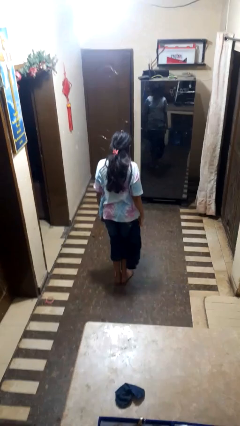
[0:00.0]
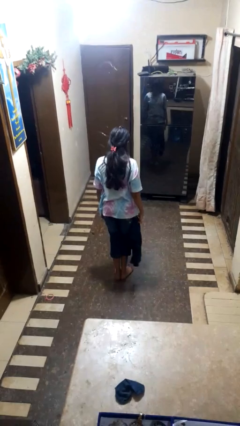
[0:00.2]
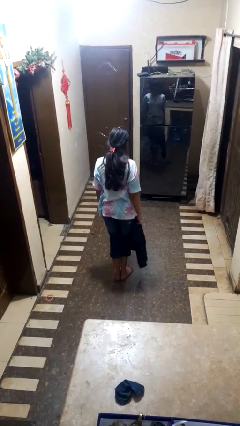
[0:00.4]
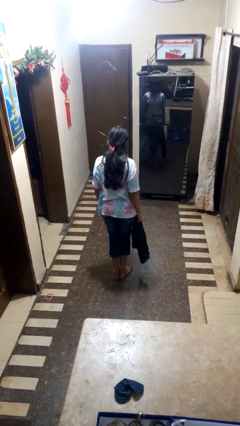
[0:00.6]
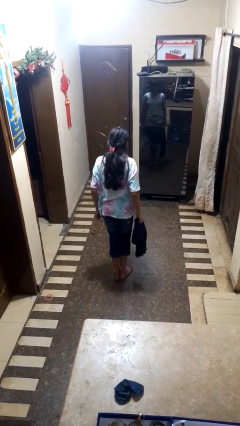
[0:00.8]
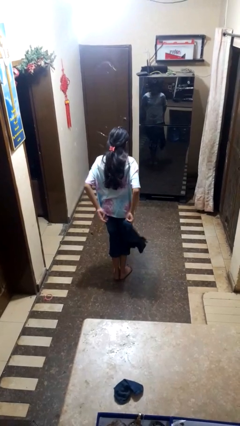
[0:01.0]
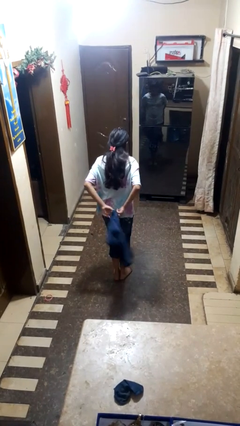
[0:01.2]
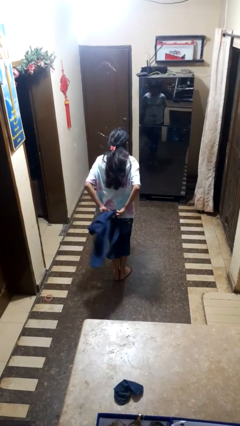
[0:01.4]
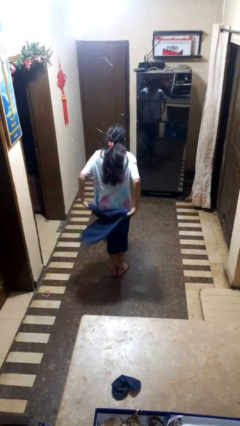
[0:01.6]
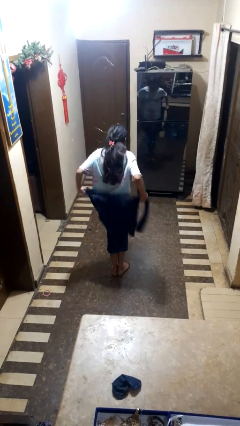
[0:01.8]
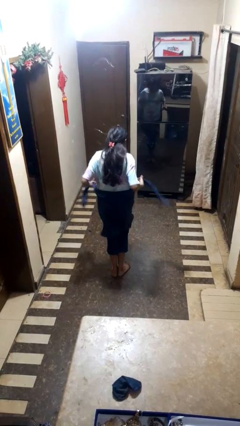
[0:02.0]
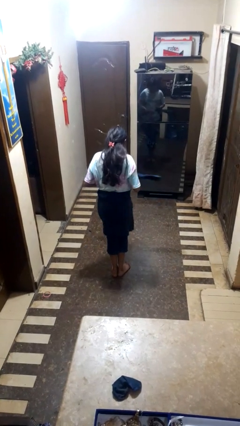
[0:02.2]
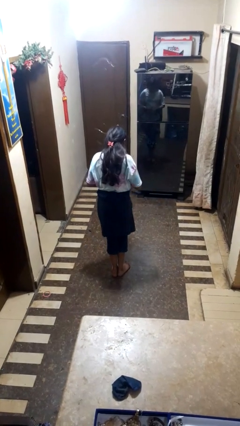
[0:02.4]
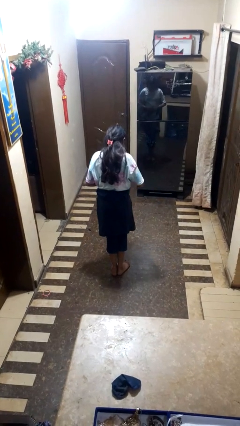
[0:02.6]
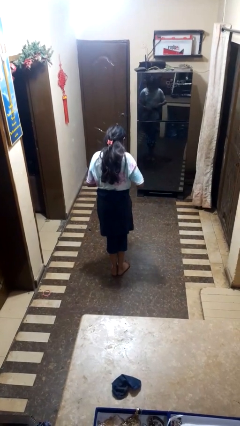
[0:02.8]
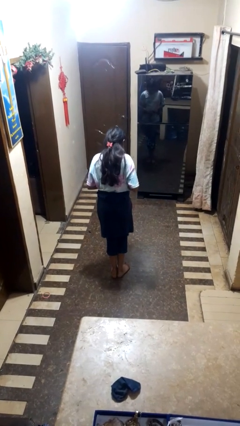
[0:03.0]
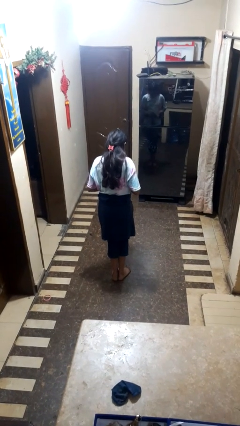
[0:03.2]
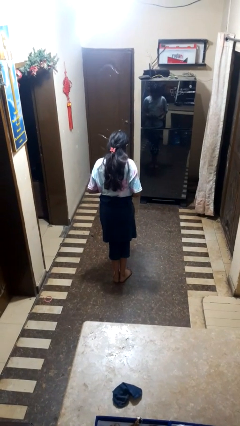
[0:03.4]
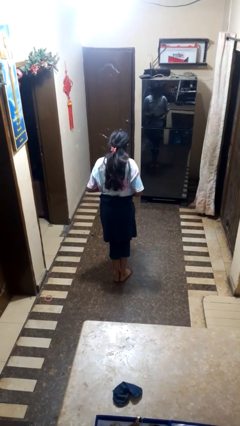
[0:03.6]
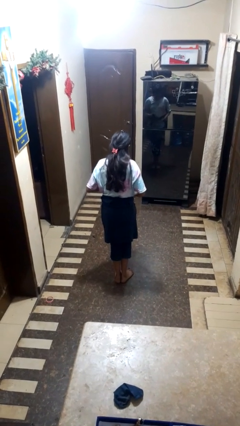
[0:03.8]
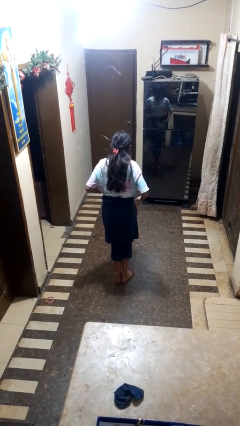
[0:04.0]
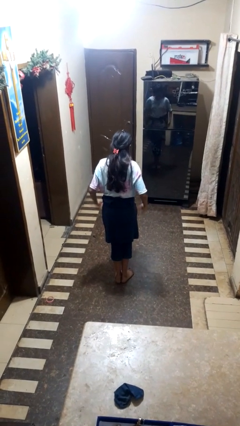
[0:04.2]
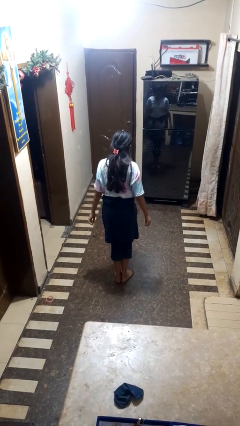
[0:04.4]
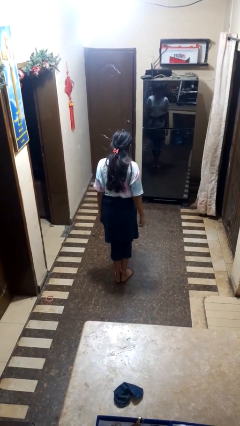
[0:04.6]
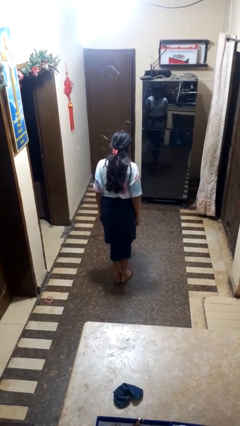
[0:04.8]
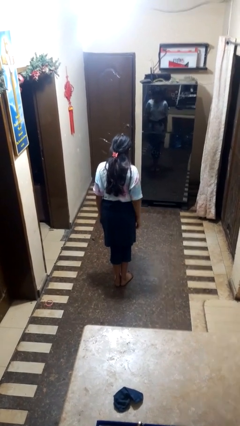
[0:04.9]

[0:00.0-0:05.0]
person ties jacket around waist

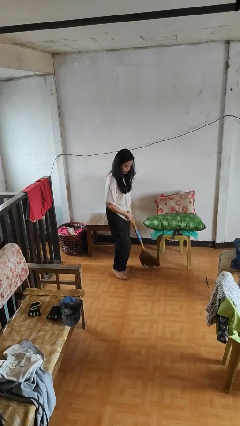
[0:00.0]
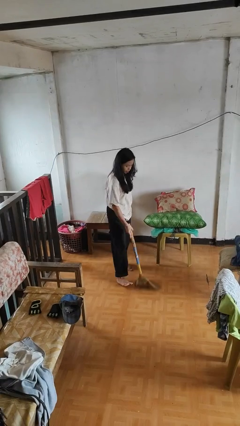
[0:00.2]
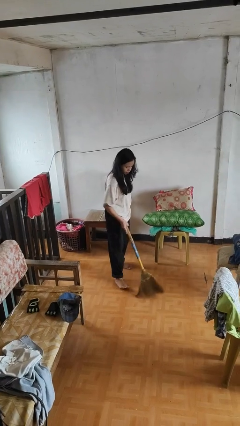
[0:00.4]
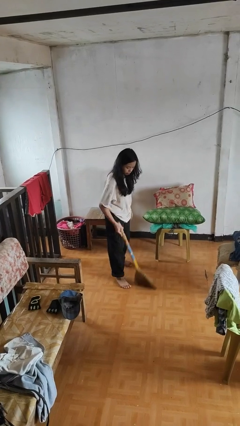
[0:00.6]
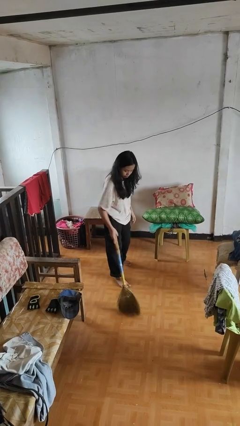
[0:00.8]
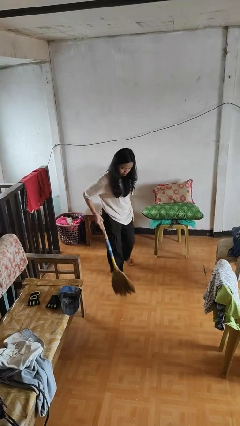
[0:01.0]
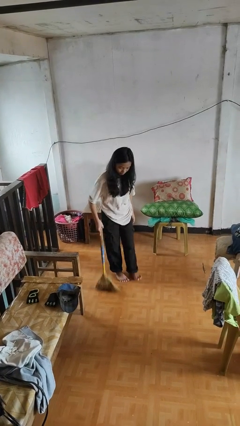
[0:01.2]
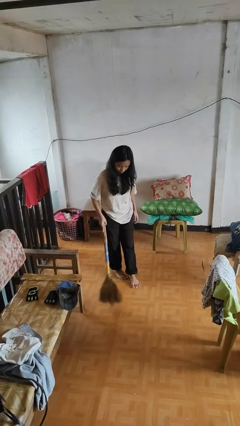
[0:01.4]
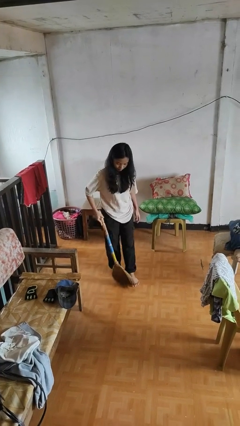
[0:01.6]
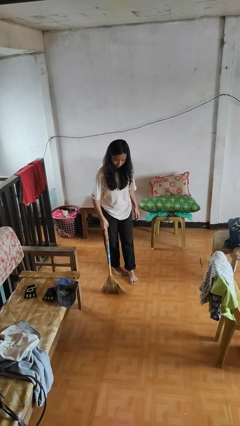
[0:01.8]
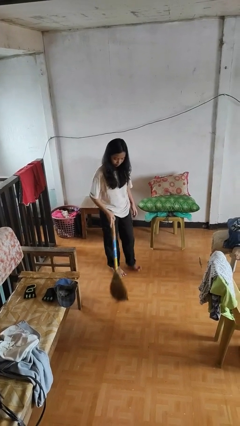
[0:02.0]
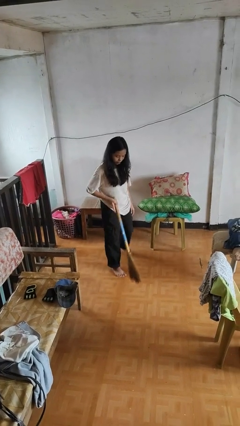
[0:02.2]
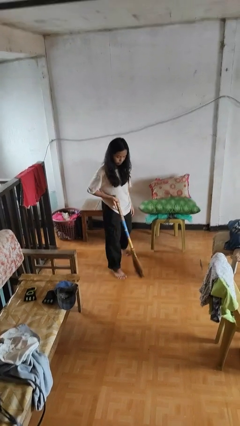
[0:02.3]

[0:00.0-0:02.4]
person sweeps floor

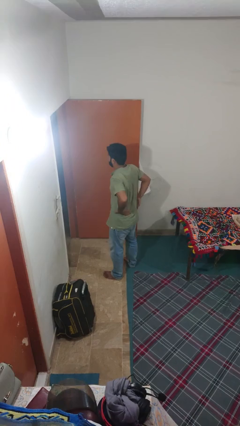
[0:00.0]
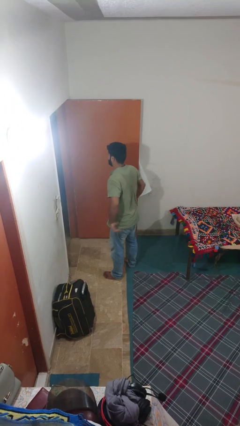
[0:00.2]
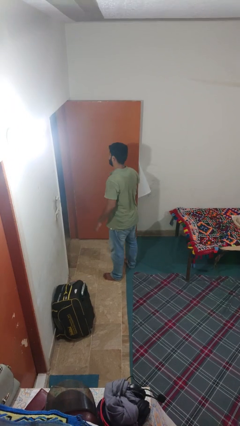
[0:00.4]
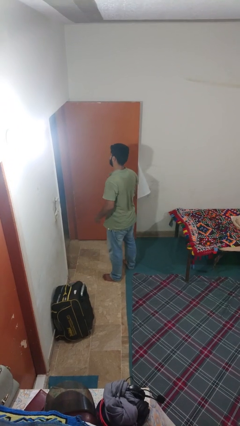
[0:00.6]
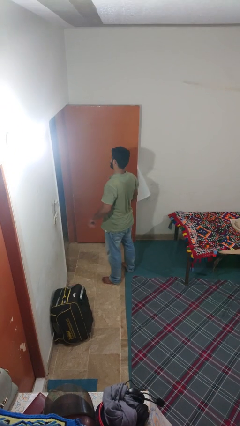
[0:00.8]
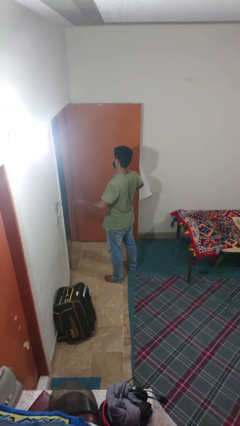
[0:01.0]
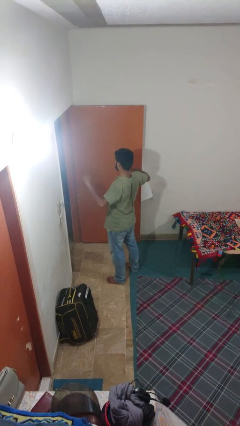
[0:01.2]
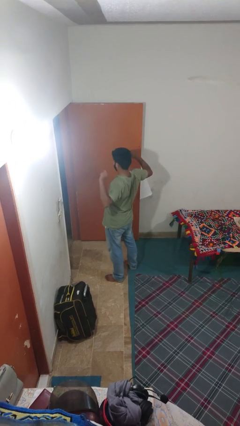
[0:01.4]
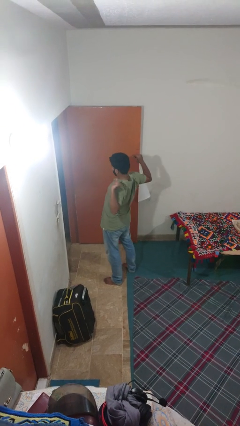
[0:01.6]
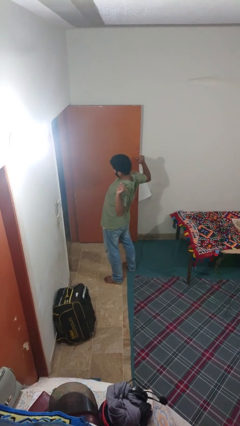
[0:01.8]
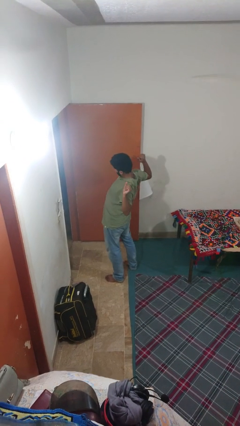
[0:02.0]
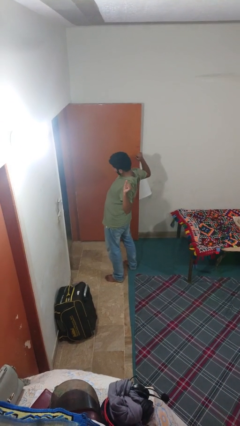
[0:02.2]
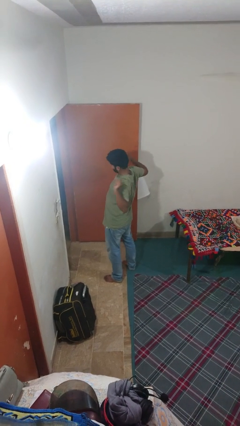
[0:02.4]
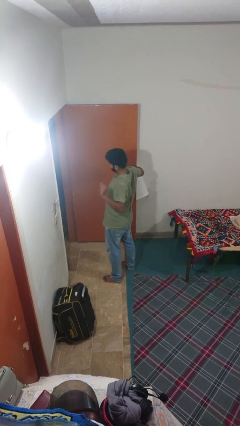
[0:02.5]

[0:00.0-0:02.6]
person stretches arms to side

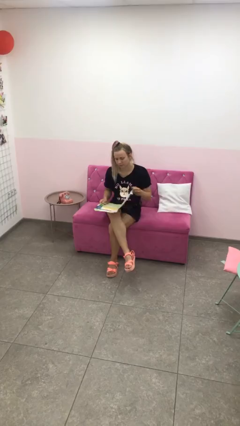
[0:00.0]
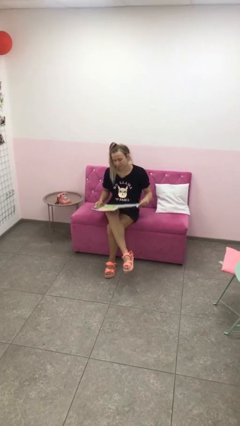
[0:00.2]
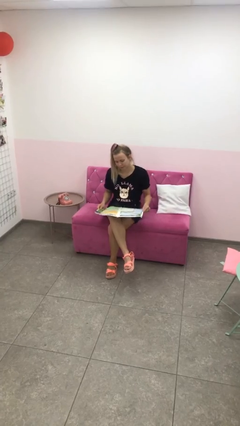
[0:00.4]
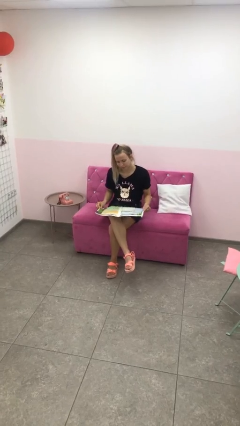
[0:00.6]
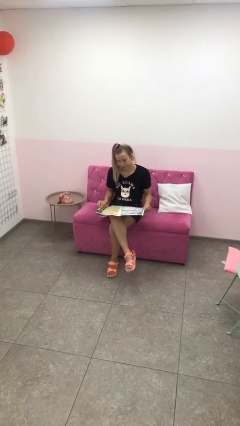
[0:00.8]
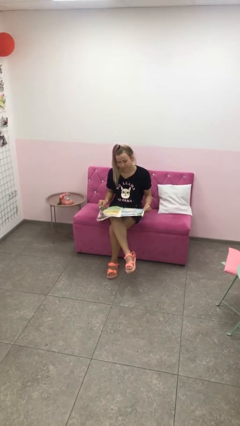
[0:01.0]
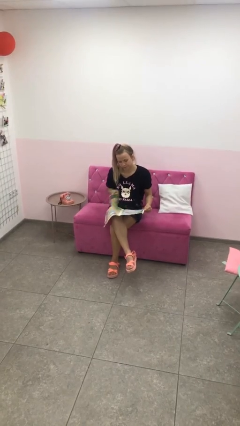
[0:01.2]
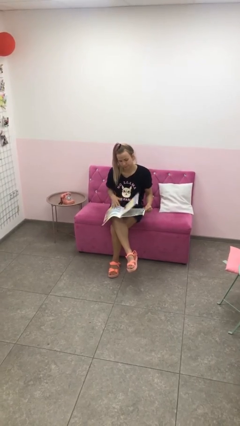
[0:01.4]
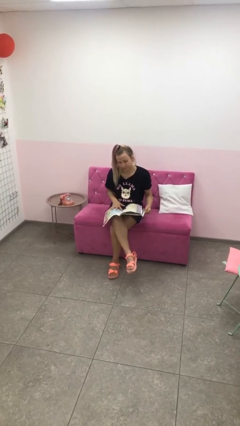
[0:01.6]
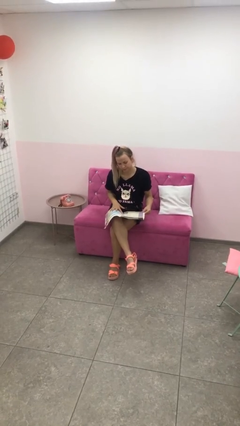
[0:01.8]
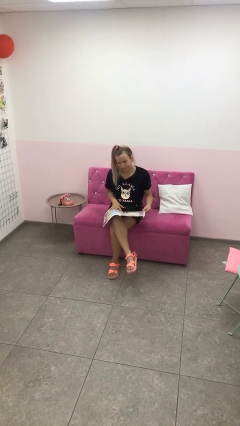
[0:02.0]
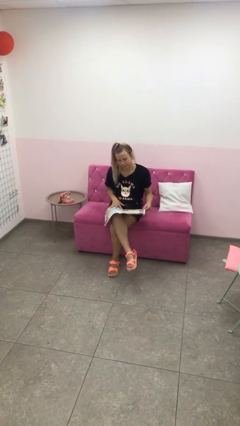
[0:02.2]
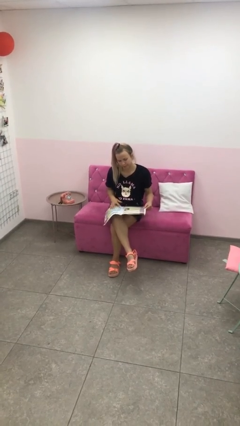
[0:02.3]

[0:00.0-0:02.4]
person reads magazine

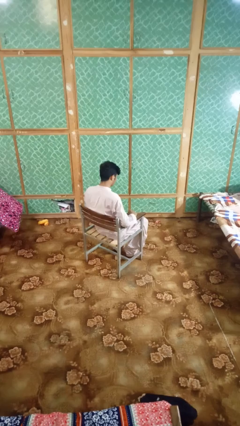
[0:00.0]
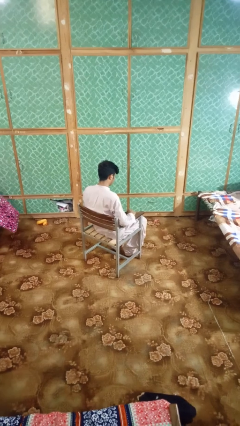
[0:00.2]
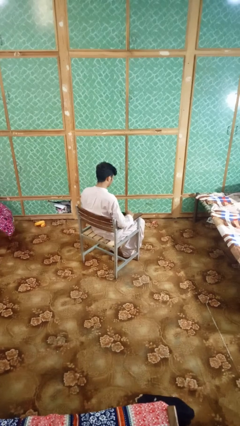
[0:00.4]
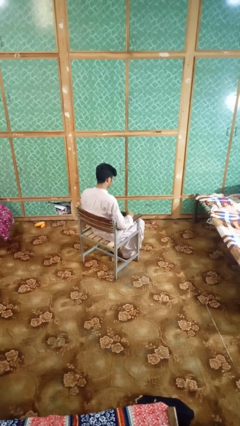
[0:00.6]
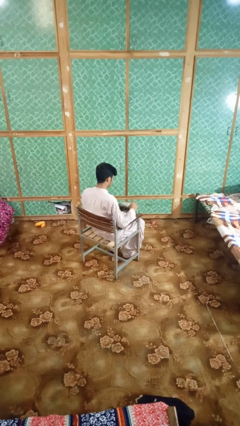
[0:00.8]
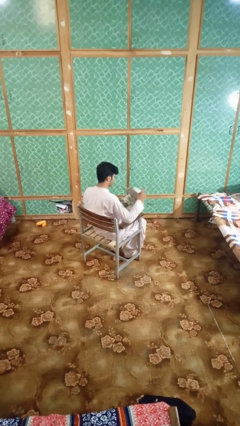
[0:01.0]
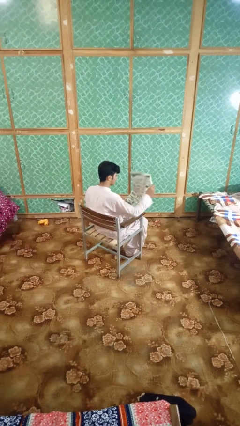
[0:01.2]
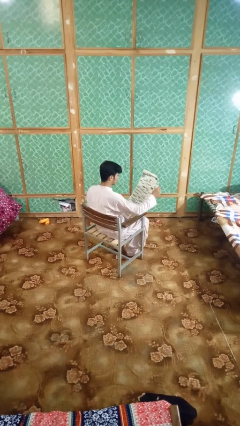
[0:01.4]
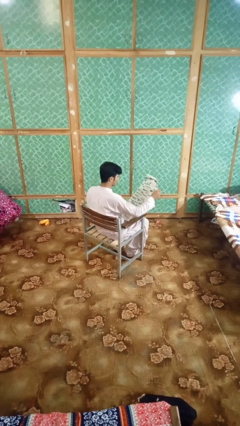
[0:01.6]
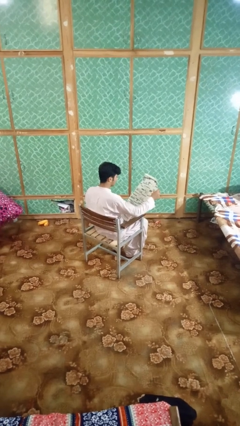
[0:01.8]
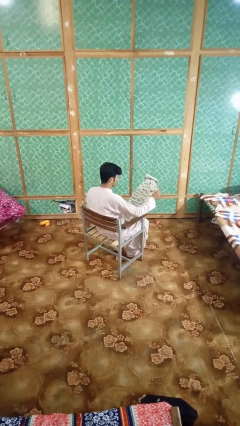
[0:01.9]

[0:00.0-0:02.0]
person reads newspaper

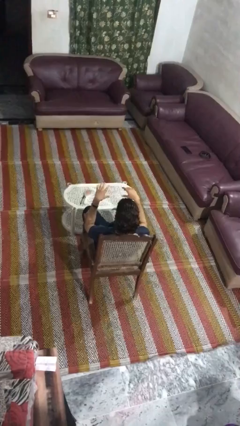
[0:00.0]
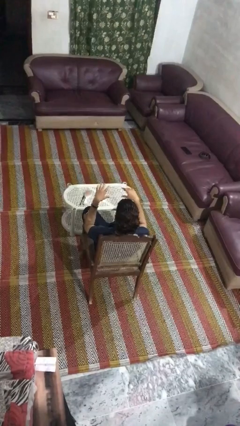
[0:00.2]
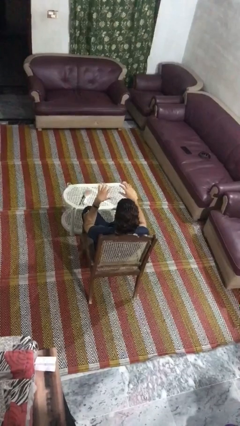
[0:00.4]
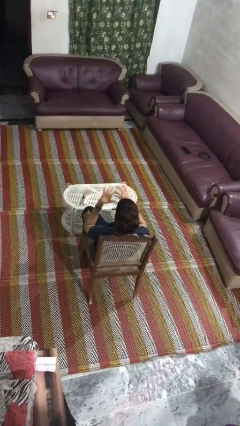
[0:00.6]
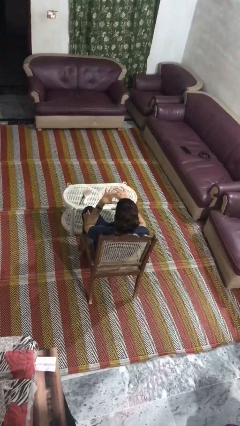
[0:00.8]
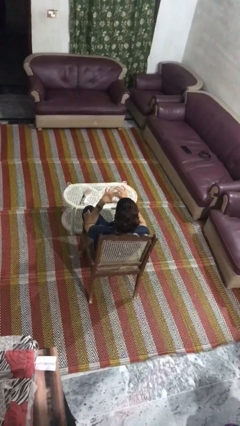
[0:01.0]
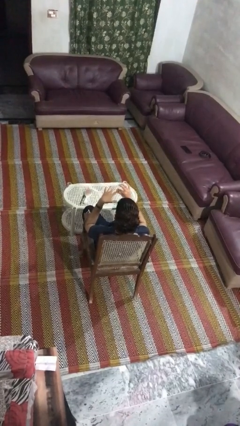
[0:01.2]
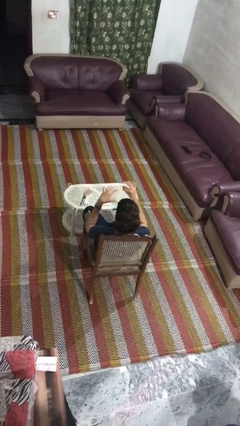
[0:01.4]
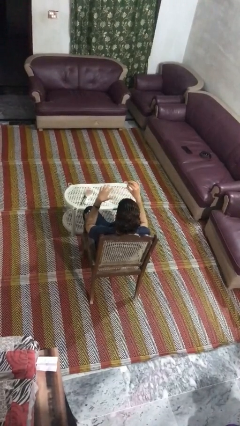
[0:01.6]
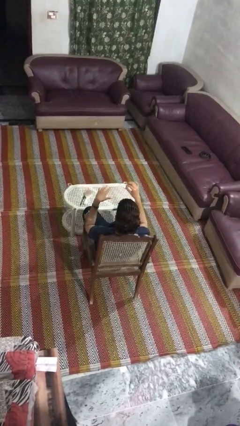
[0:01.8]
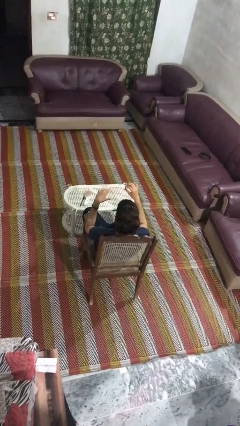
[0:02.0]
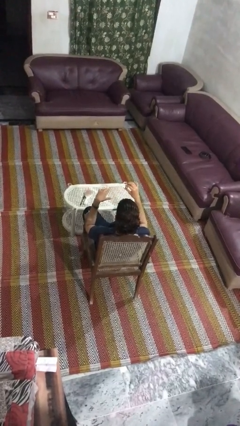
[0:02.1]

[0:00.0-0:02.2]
person takes off ring

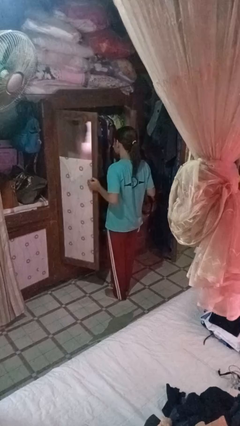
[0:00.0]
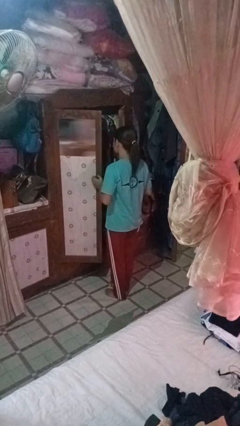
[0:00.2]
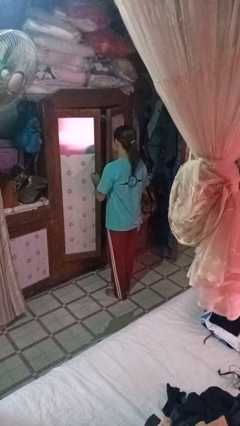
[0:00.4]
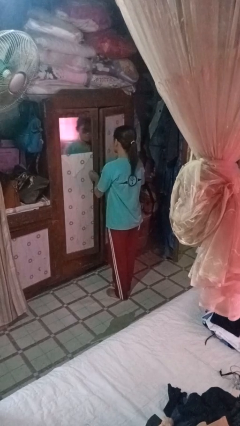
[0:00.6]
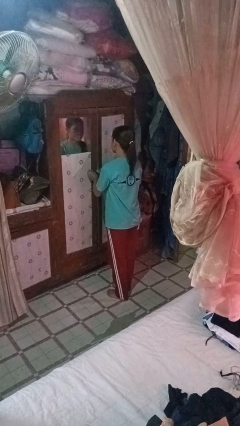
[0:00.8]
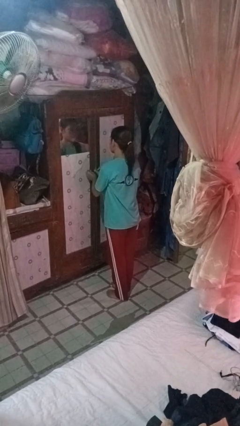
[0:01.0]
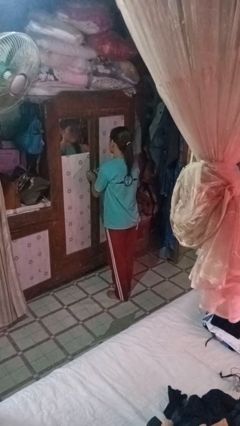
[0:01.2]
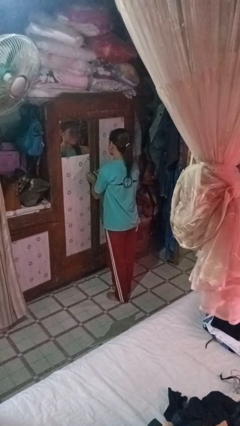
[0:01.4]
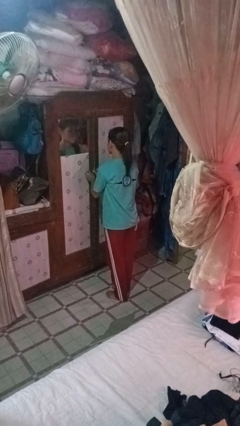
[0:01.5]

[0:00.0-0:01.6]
person closes closet door
